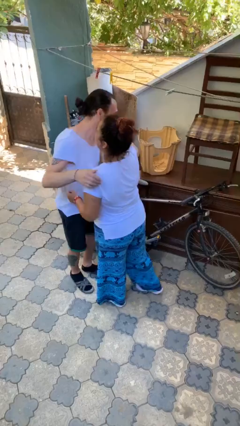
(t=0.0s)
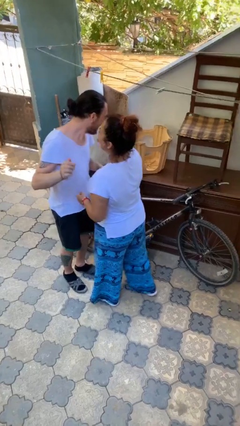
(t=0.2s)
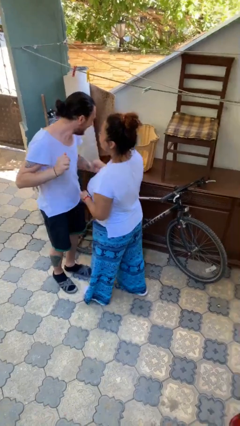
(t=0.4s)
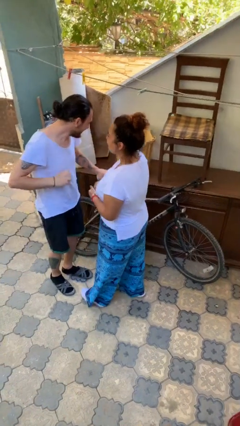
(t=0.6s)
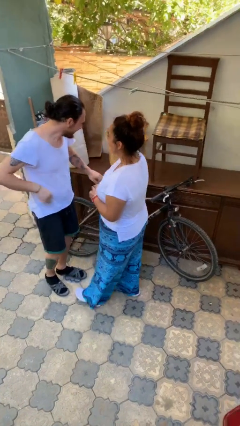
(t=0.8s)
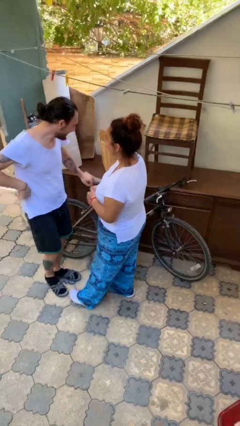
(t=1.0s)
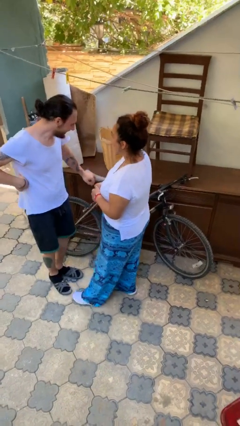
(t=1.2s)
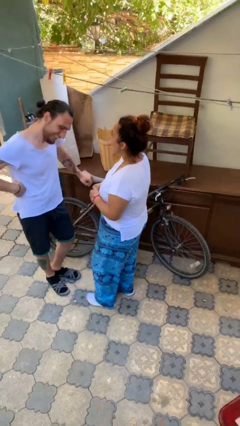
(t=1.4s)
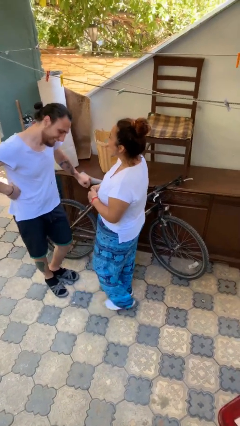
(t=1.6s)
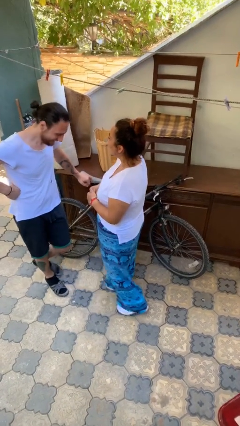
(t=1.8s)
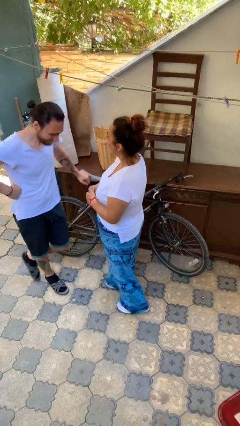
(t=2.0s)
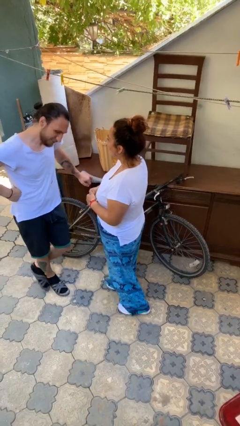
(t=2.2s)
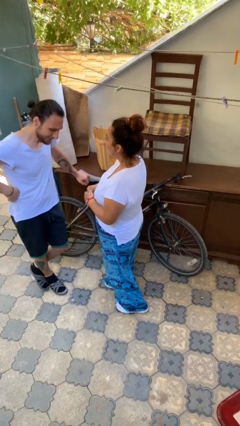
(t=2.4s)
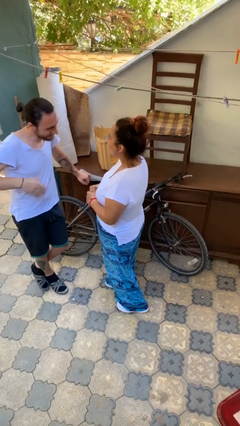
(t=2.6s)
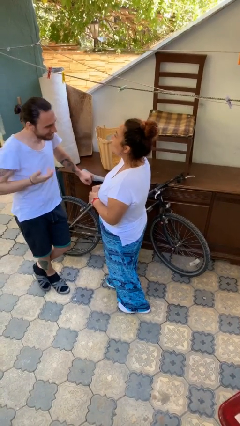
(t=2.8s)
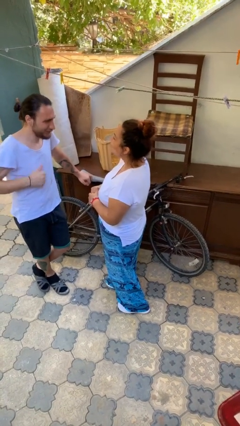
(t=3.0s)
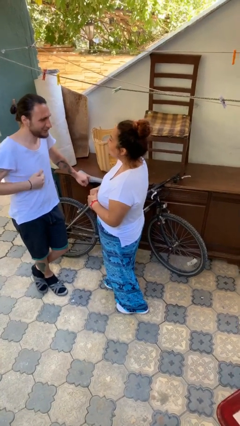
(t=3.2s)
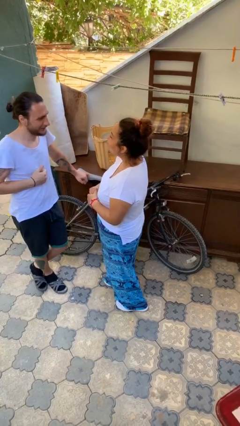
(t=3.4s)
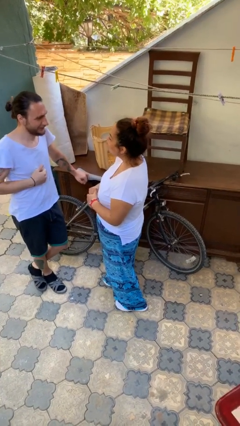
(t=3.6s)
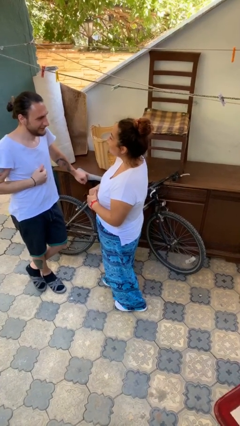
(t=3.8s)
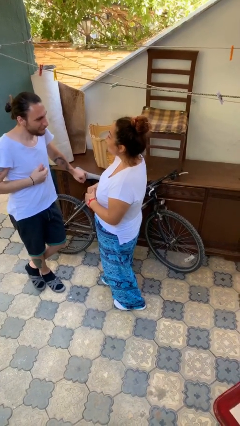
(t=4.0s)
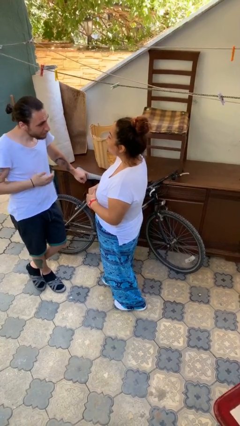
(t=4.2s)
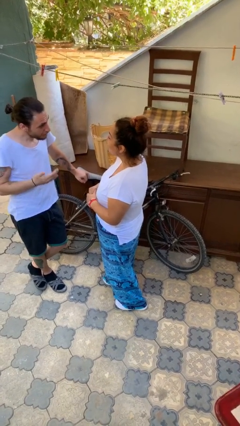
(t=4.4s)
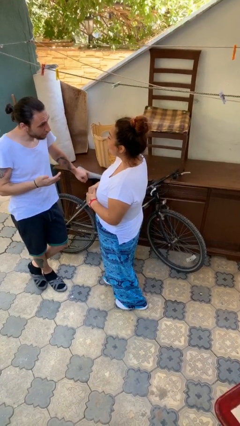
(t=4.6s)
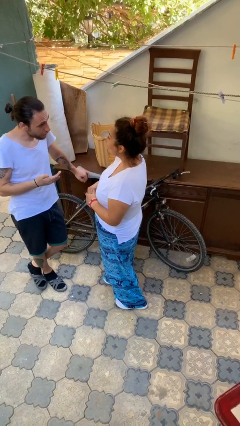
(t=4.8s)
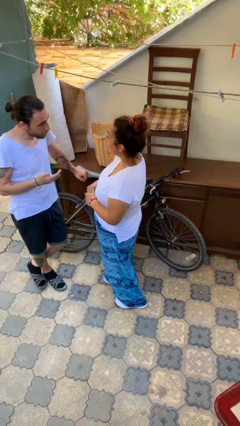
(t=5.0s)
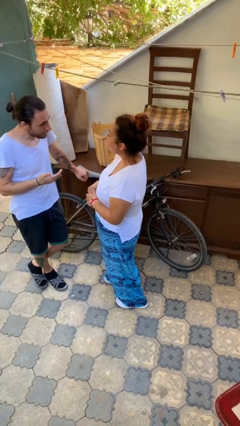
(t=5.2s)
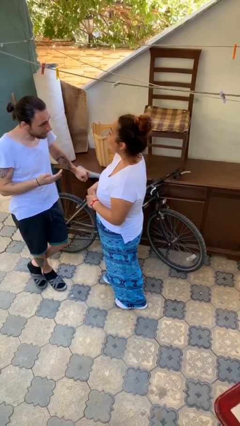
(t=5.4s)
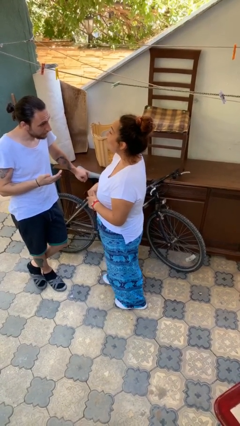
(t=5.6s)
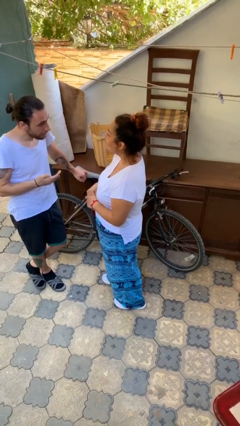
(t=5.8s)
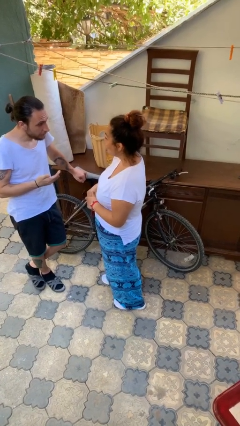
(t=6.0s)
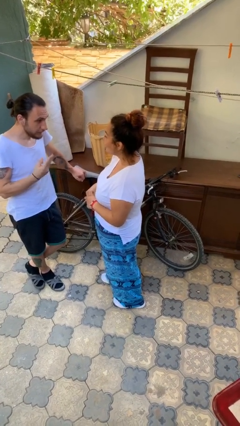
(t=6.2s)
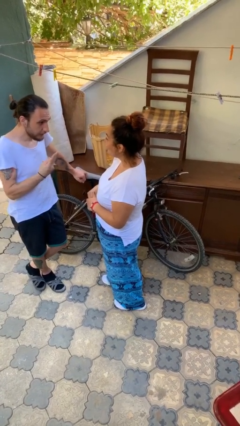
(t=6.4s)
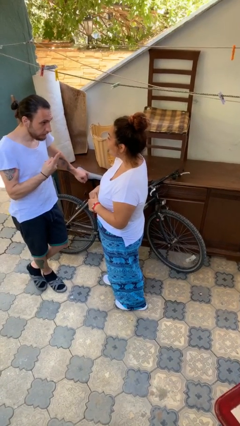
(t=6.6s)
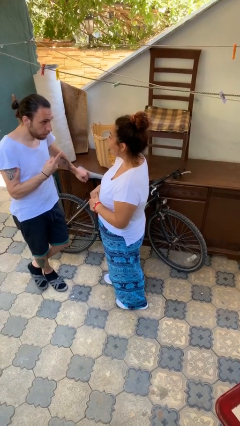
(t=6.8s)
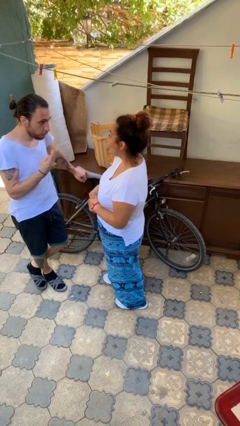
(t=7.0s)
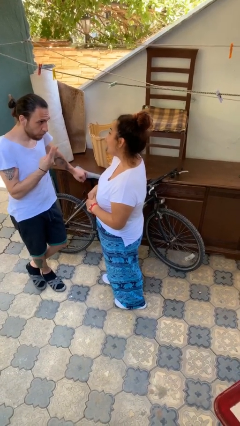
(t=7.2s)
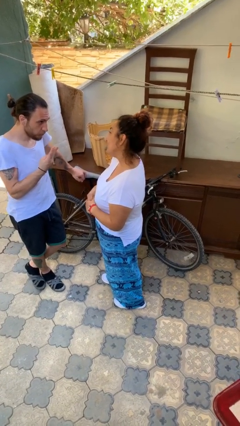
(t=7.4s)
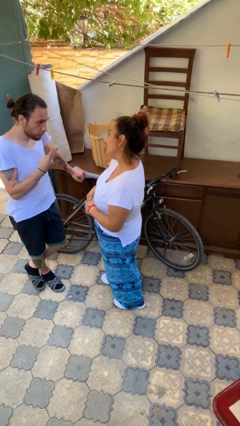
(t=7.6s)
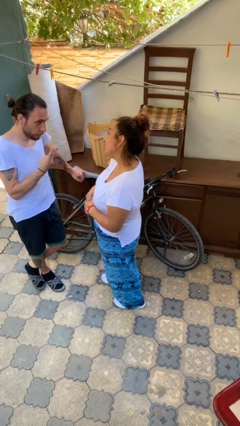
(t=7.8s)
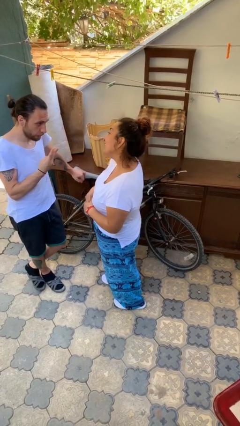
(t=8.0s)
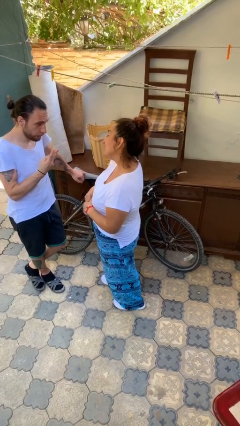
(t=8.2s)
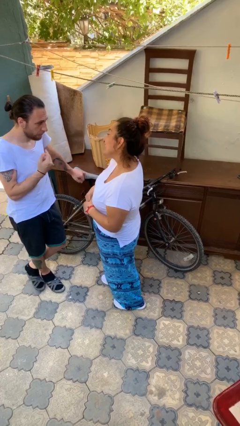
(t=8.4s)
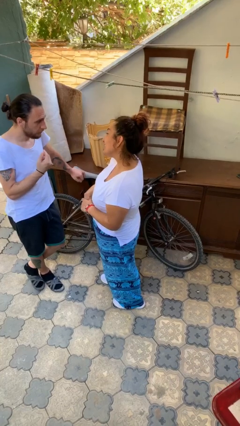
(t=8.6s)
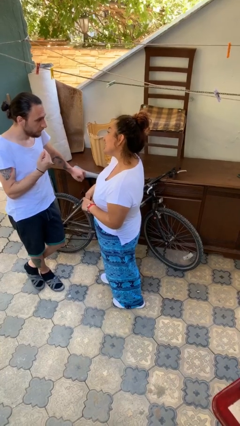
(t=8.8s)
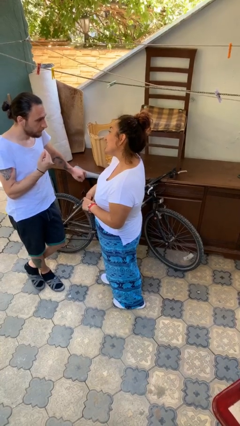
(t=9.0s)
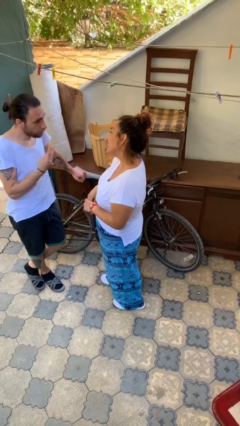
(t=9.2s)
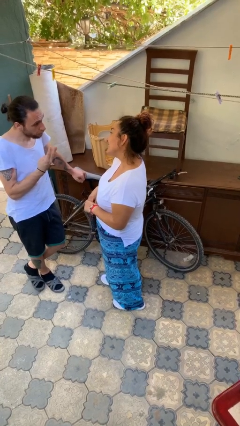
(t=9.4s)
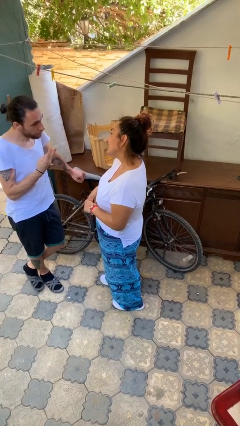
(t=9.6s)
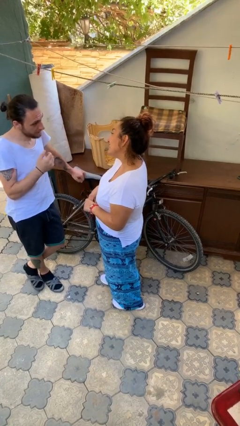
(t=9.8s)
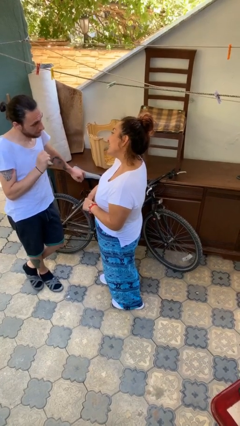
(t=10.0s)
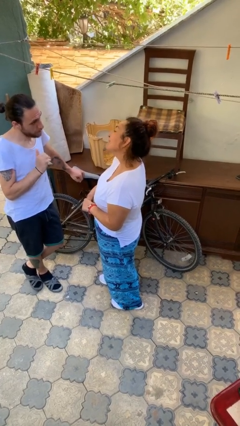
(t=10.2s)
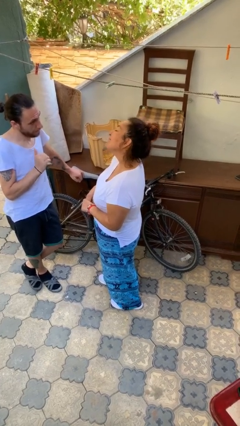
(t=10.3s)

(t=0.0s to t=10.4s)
person talks to person

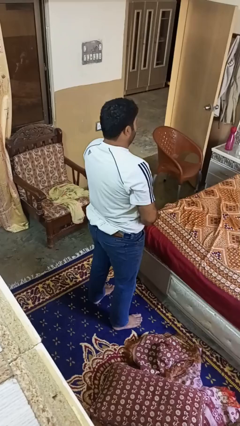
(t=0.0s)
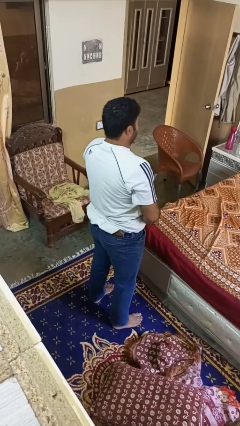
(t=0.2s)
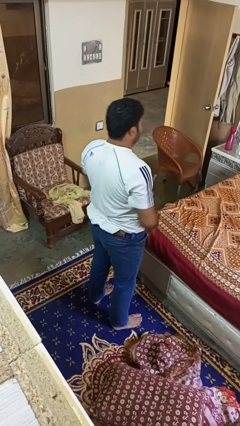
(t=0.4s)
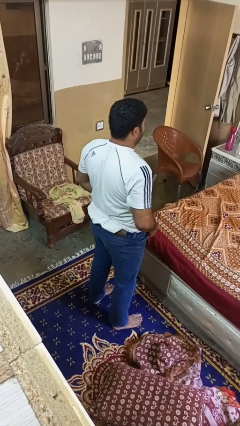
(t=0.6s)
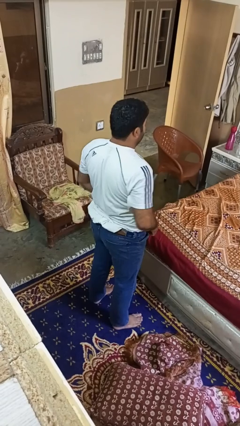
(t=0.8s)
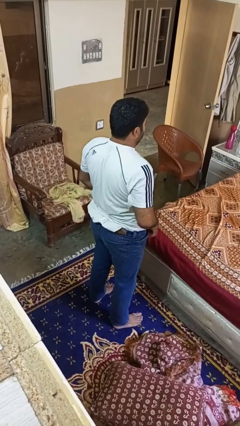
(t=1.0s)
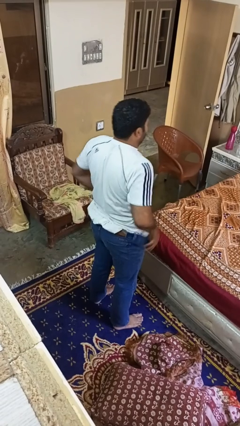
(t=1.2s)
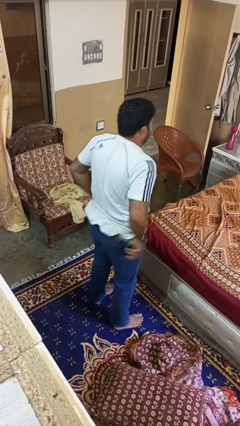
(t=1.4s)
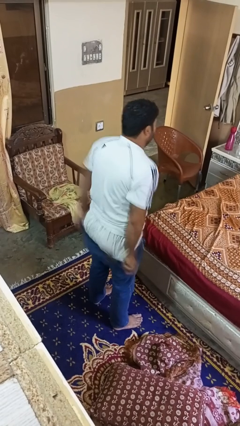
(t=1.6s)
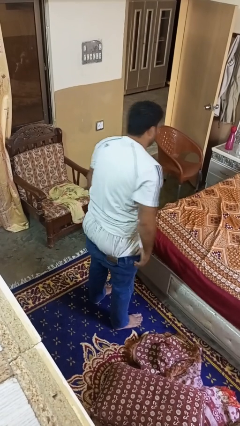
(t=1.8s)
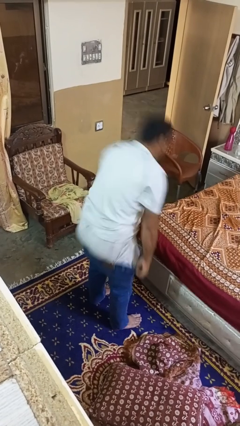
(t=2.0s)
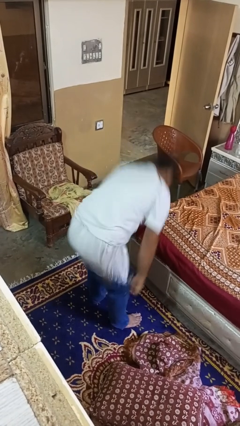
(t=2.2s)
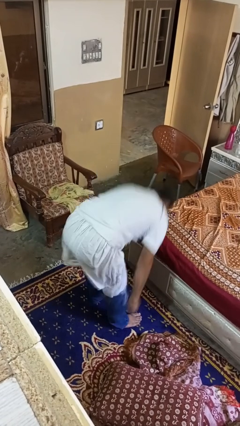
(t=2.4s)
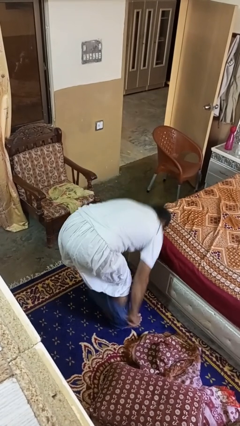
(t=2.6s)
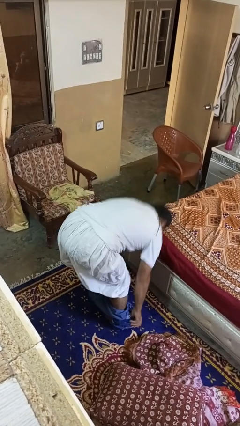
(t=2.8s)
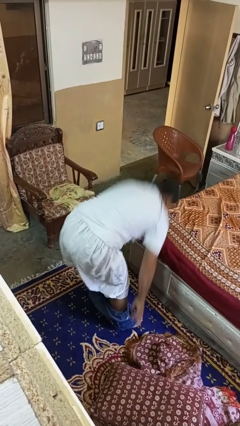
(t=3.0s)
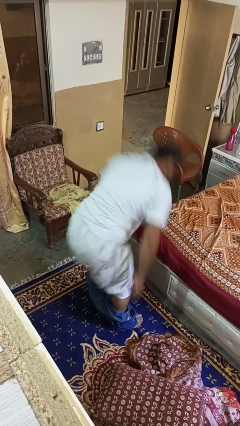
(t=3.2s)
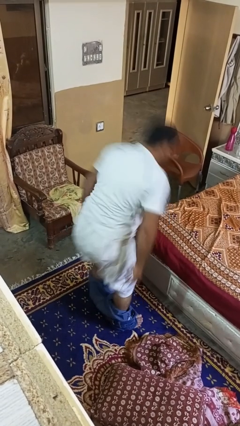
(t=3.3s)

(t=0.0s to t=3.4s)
person takes off pants

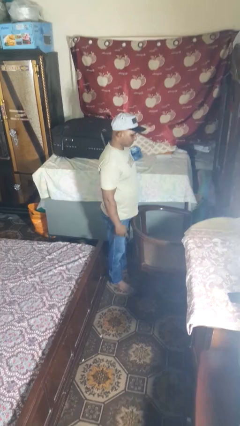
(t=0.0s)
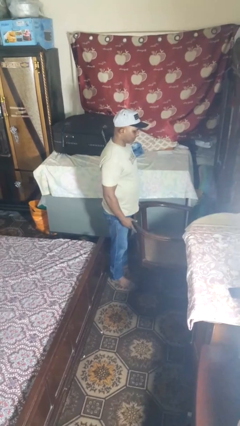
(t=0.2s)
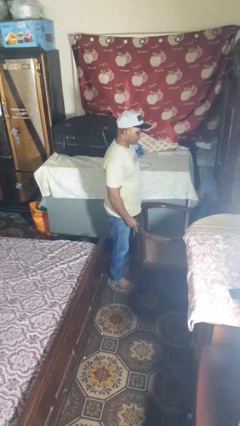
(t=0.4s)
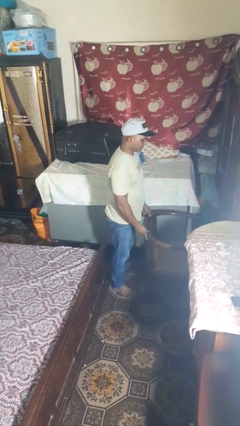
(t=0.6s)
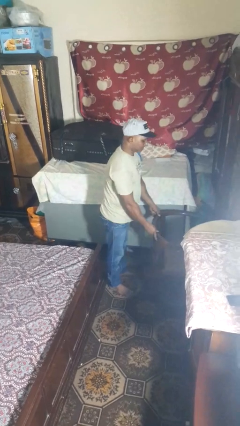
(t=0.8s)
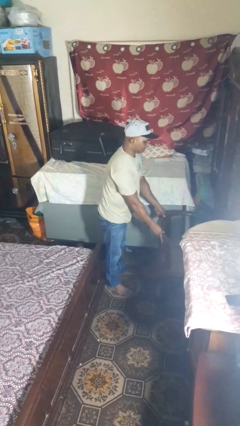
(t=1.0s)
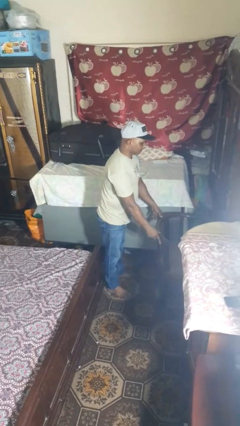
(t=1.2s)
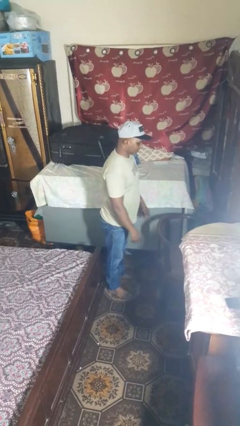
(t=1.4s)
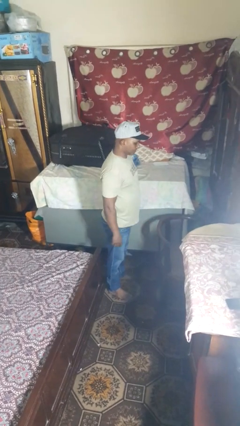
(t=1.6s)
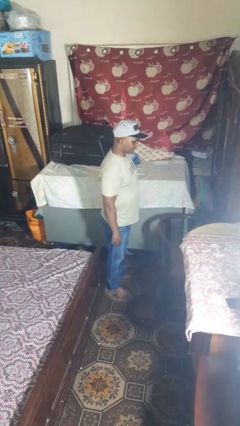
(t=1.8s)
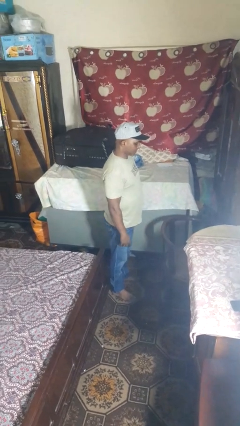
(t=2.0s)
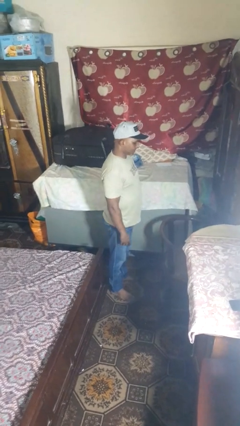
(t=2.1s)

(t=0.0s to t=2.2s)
person pushes in chair

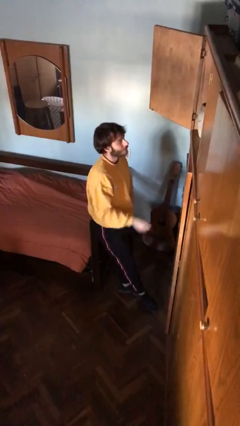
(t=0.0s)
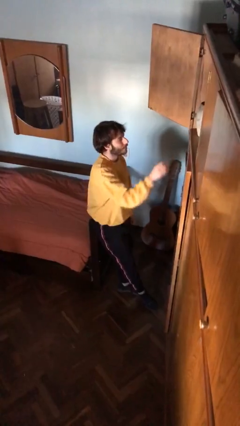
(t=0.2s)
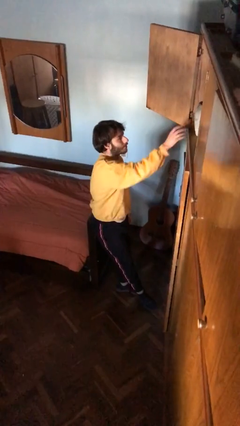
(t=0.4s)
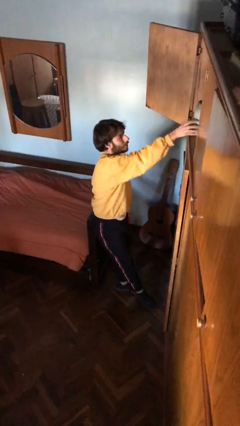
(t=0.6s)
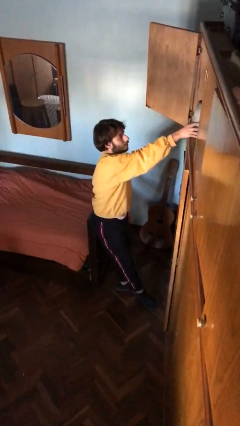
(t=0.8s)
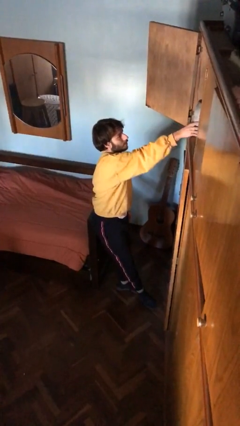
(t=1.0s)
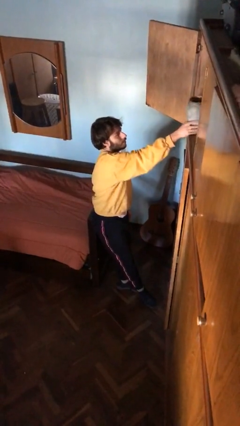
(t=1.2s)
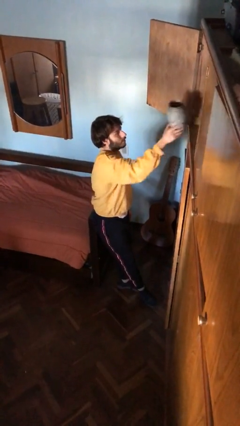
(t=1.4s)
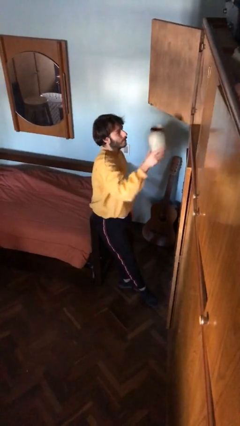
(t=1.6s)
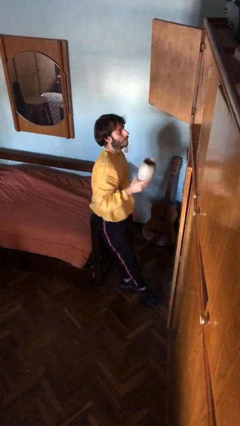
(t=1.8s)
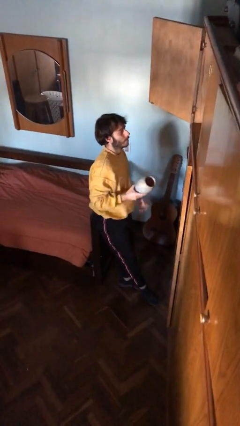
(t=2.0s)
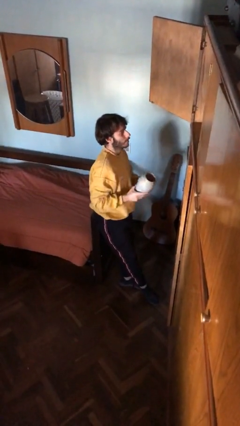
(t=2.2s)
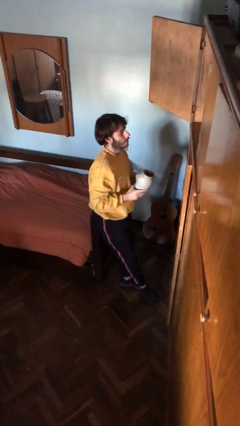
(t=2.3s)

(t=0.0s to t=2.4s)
person picks up object from cabinet
